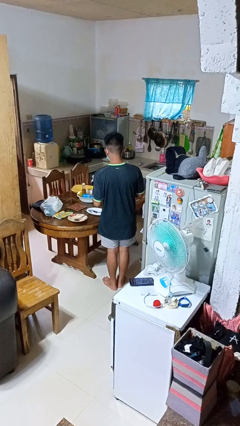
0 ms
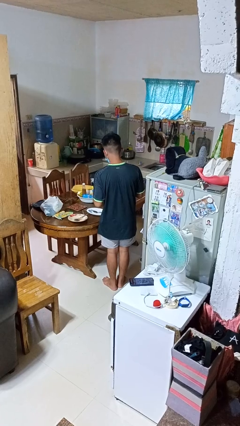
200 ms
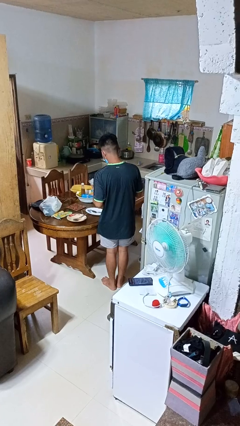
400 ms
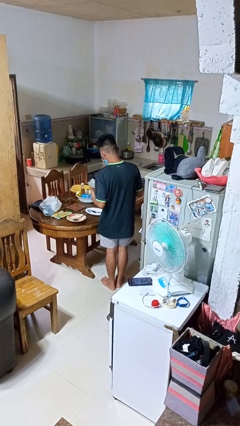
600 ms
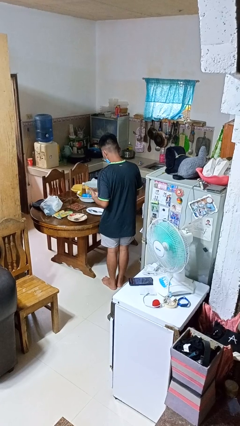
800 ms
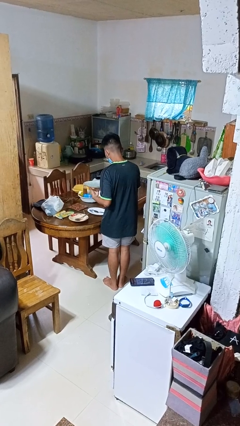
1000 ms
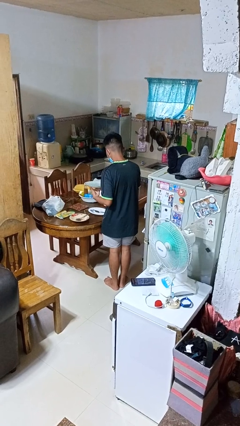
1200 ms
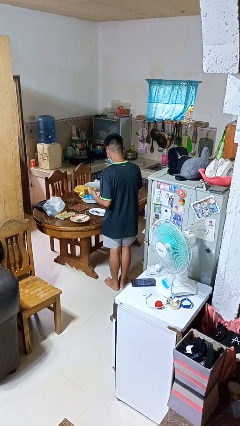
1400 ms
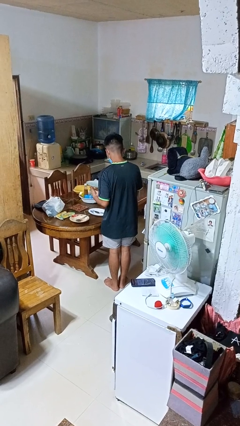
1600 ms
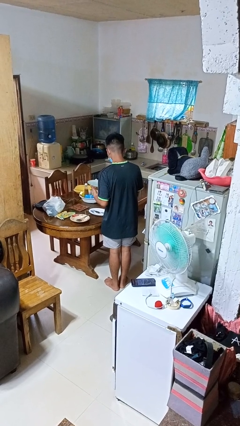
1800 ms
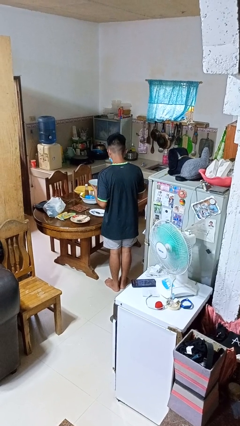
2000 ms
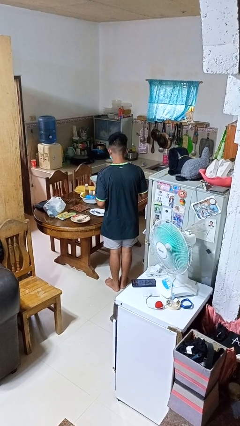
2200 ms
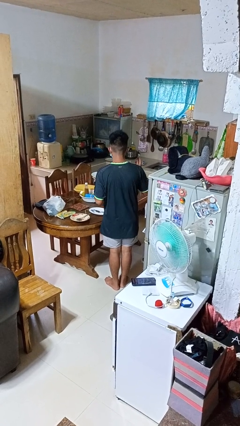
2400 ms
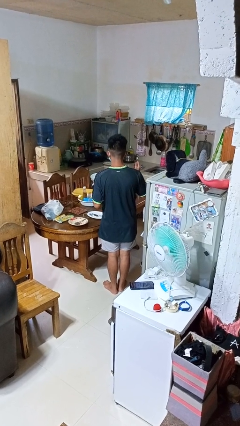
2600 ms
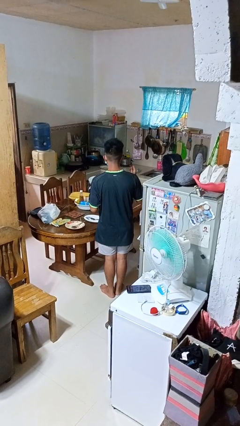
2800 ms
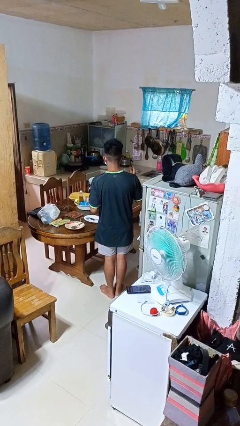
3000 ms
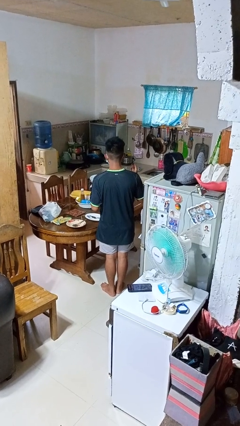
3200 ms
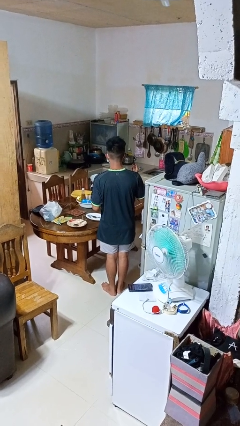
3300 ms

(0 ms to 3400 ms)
person sets table

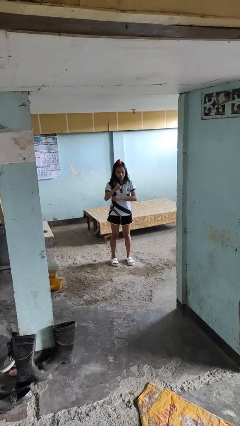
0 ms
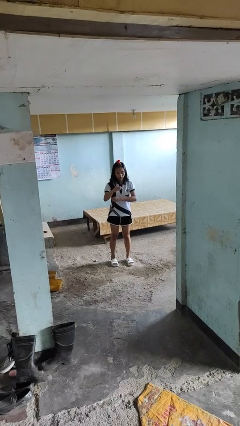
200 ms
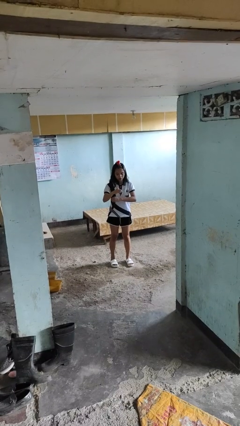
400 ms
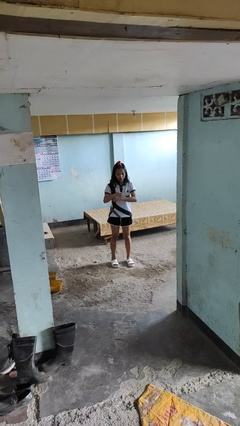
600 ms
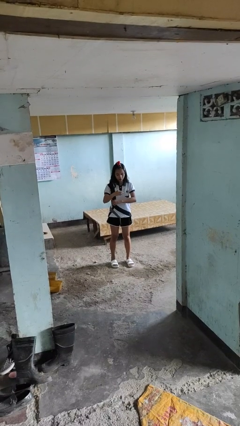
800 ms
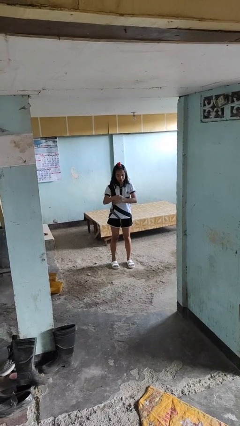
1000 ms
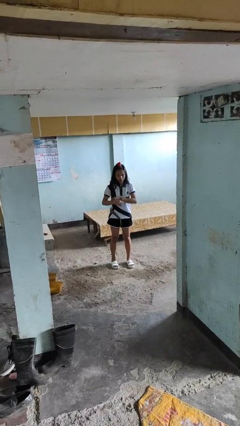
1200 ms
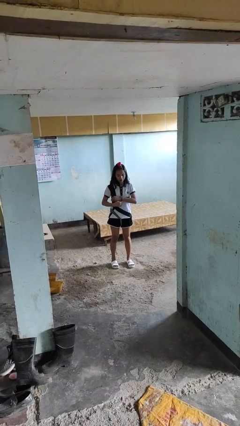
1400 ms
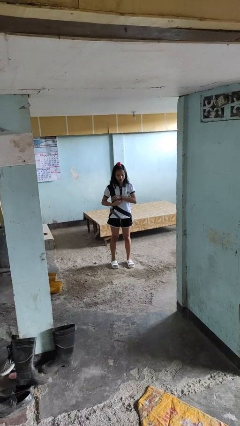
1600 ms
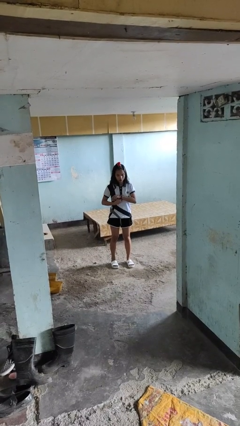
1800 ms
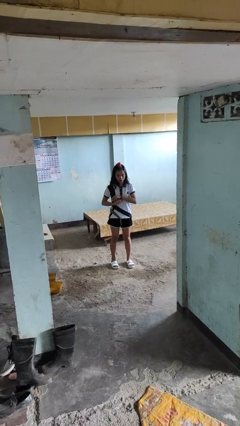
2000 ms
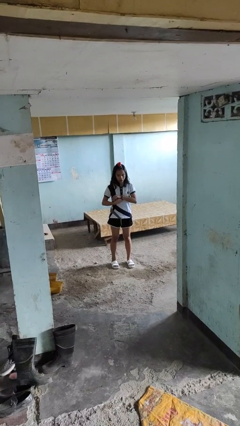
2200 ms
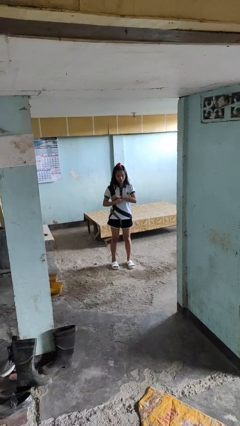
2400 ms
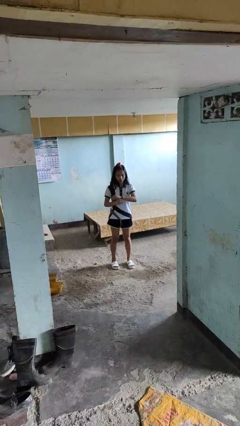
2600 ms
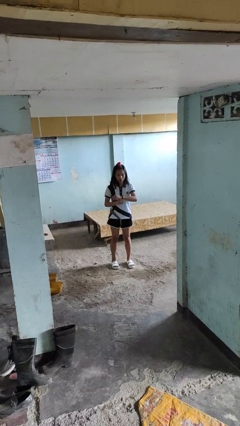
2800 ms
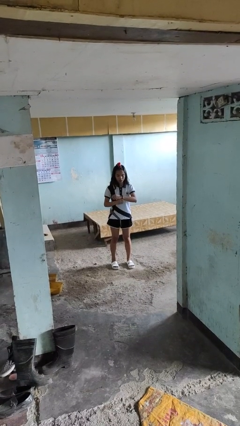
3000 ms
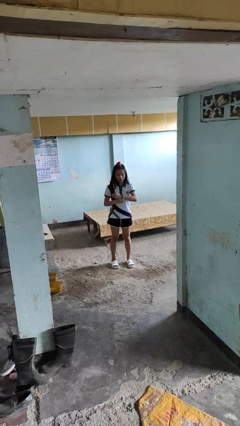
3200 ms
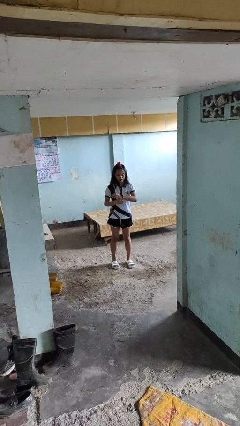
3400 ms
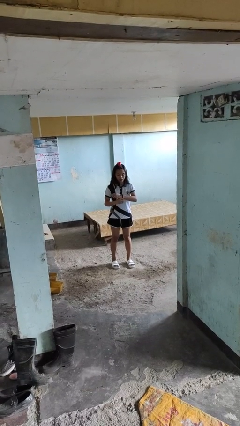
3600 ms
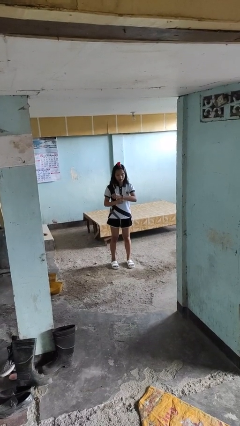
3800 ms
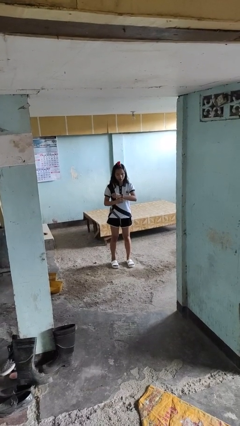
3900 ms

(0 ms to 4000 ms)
person puts on wristwatch

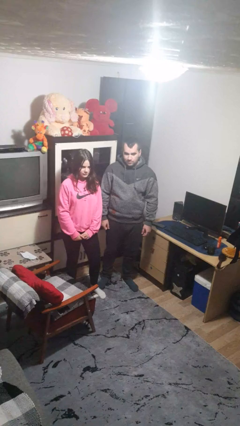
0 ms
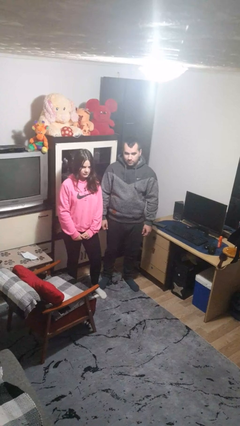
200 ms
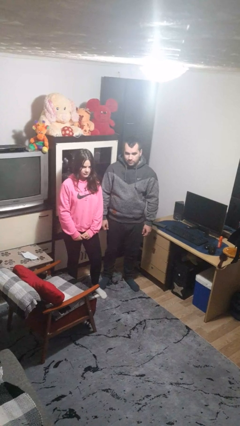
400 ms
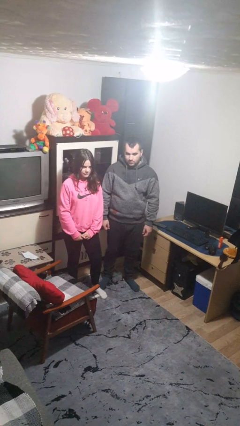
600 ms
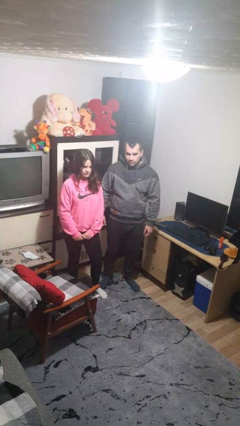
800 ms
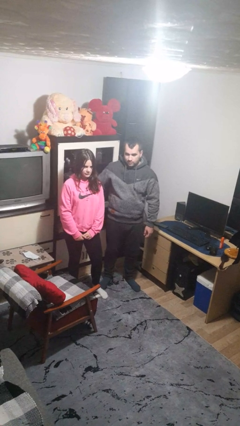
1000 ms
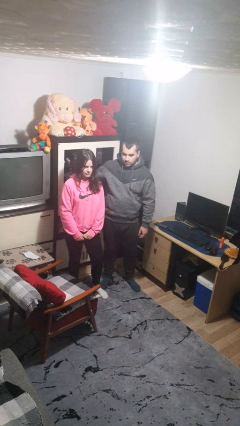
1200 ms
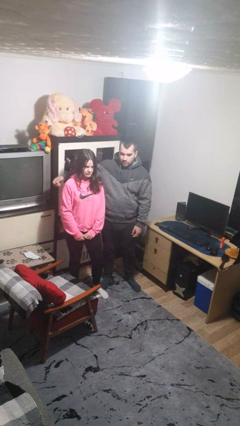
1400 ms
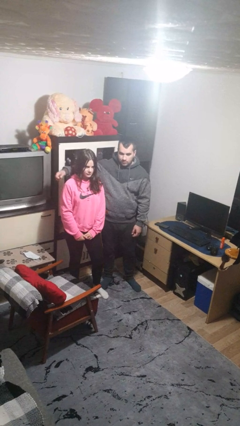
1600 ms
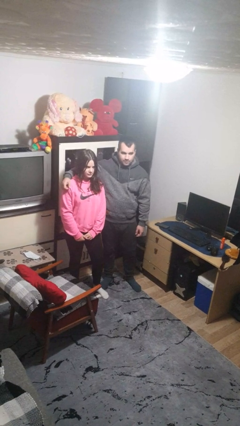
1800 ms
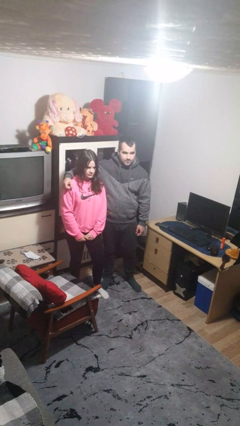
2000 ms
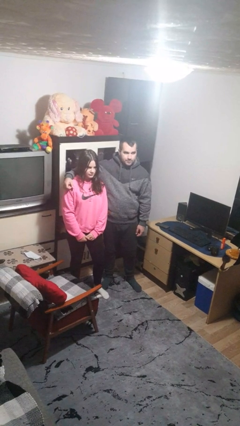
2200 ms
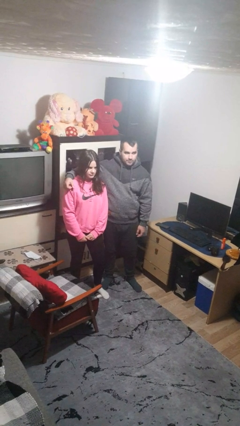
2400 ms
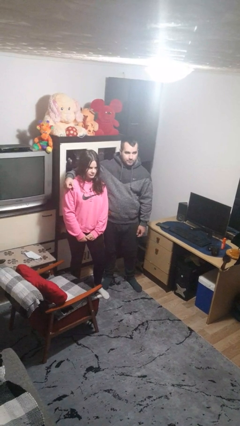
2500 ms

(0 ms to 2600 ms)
person hugs person from side

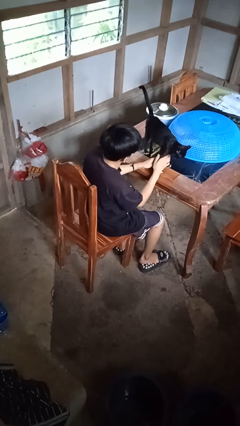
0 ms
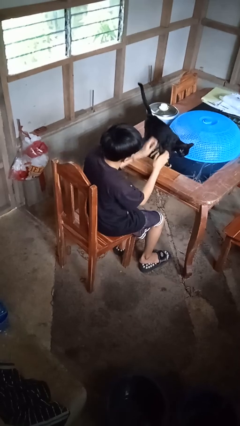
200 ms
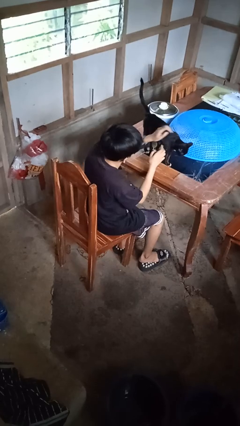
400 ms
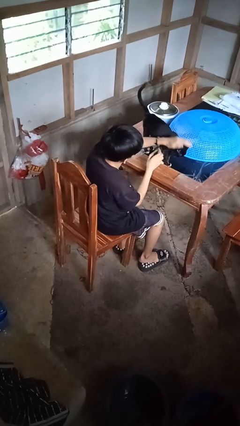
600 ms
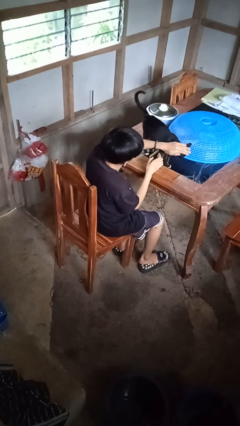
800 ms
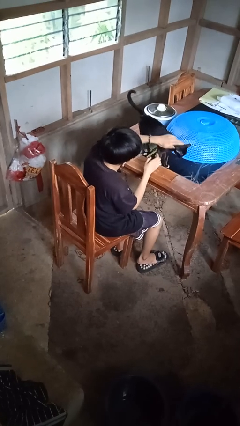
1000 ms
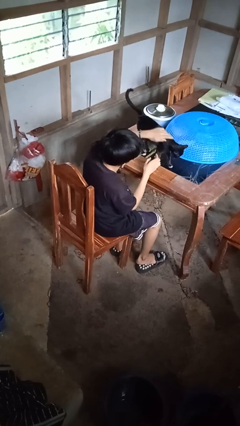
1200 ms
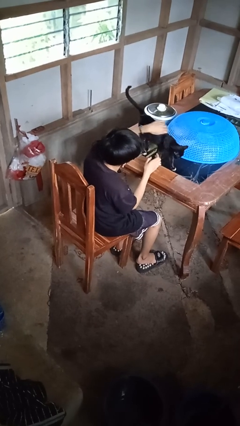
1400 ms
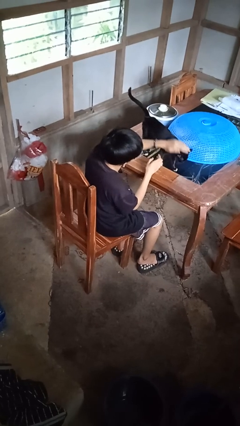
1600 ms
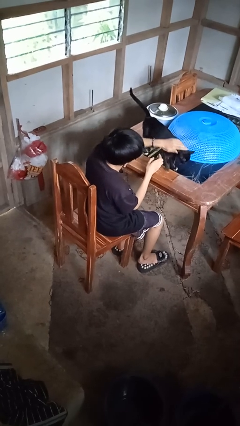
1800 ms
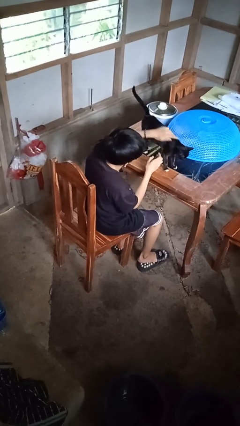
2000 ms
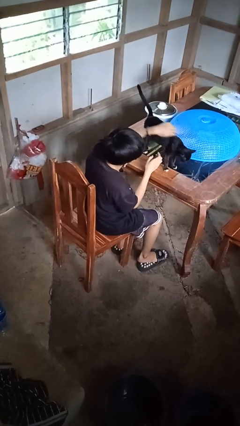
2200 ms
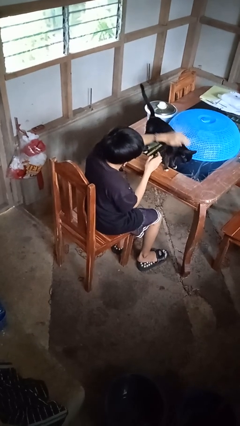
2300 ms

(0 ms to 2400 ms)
person pets cat

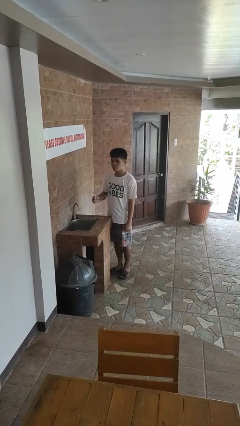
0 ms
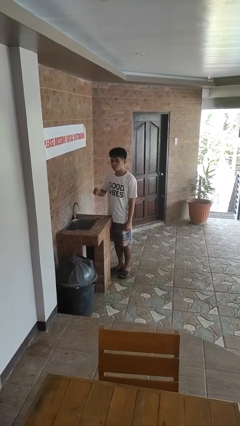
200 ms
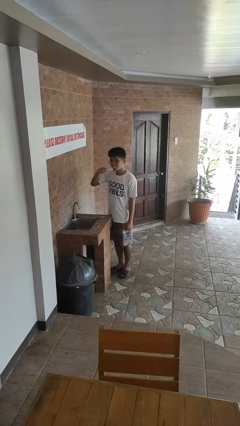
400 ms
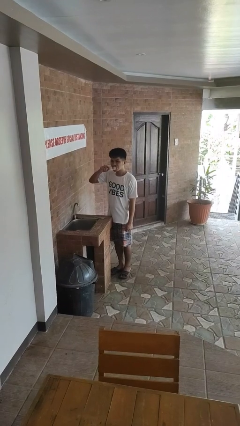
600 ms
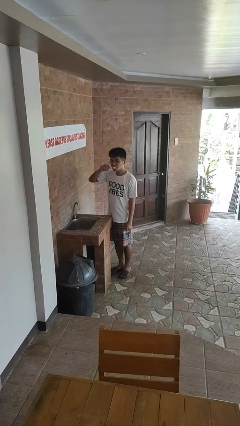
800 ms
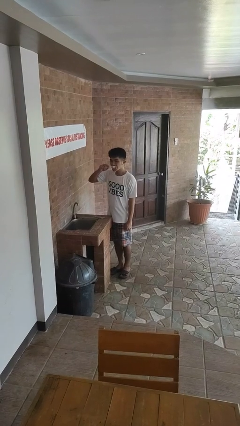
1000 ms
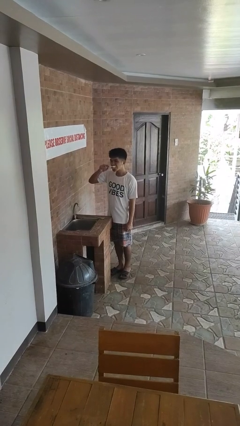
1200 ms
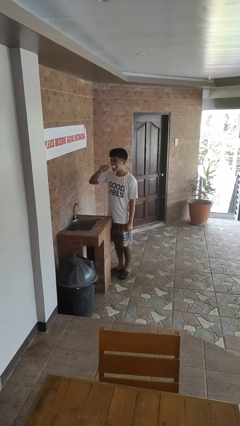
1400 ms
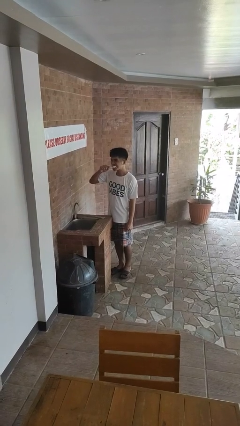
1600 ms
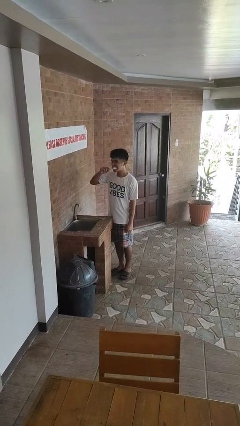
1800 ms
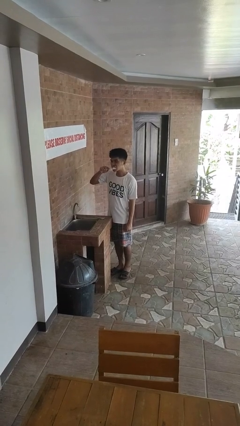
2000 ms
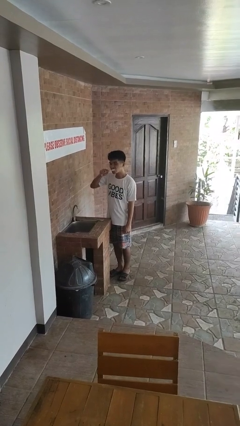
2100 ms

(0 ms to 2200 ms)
person brushes teeth

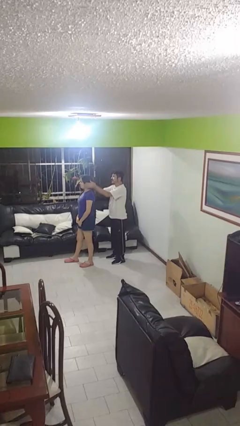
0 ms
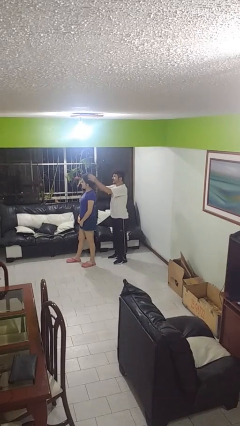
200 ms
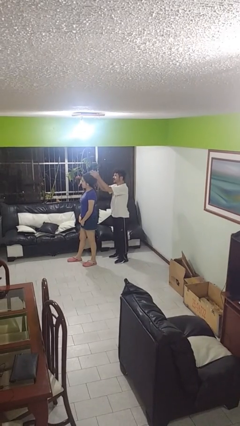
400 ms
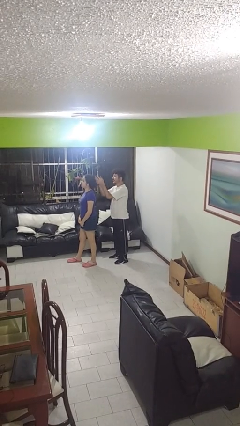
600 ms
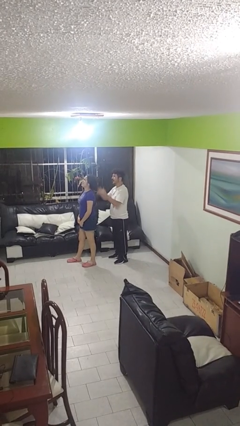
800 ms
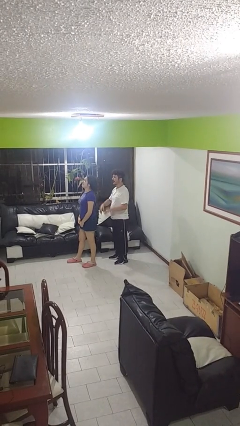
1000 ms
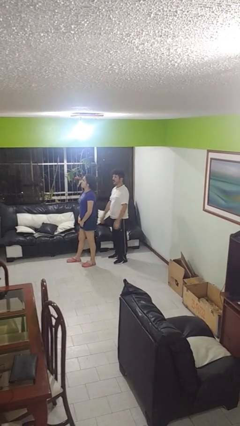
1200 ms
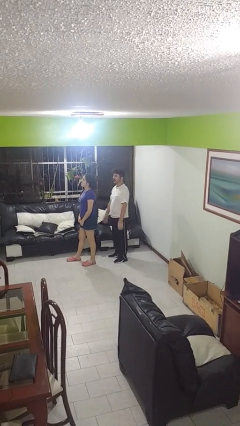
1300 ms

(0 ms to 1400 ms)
person grabs person by hair

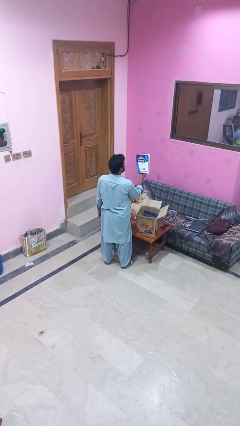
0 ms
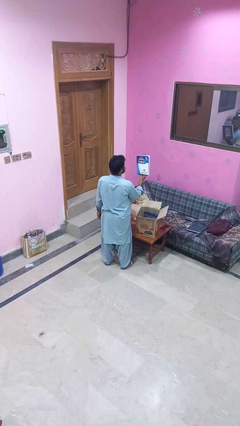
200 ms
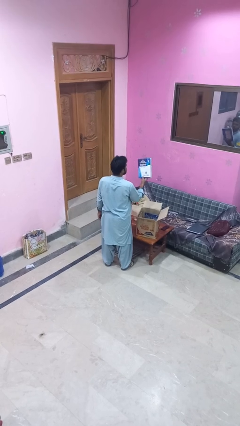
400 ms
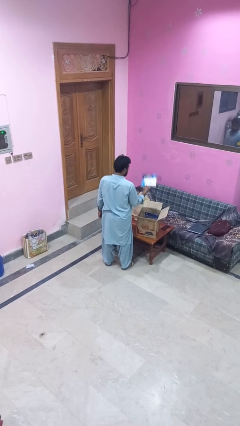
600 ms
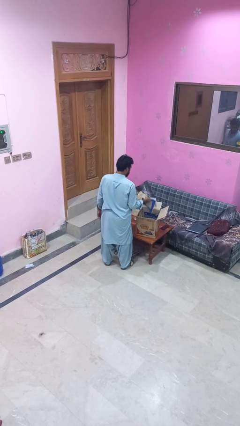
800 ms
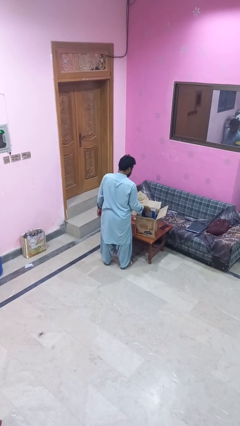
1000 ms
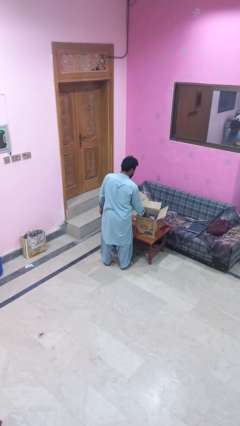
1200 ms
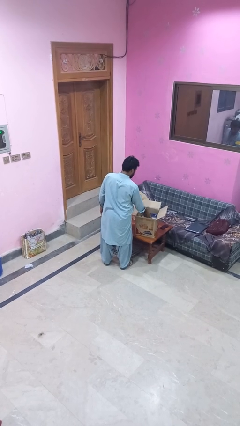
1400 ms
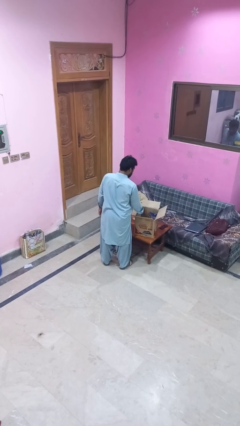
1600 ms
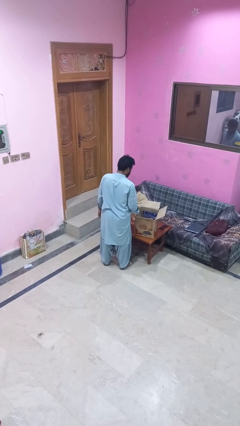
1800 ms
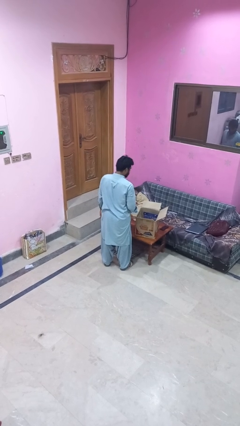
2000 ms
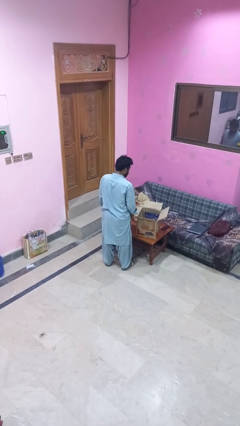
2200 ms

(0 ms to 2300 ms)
person puts object into box
